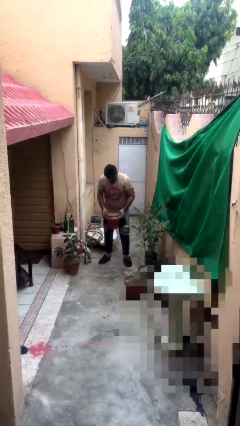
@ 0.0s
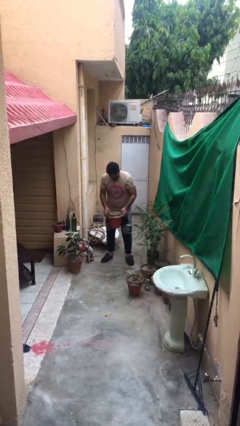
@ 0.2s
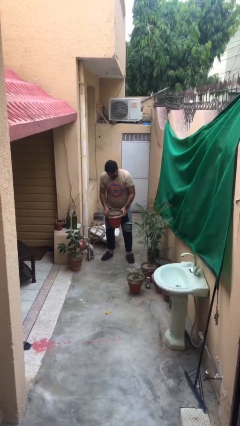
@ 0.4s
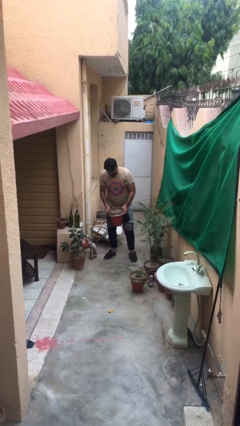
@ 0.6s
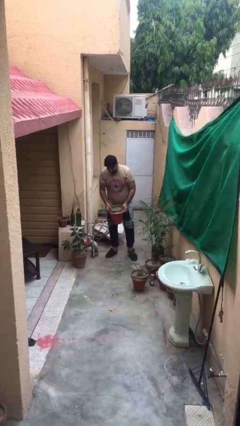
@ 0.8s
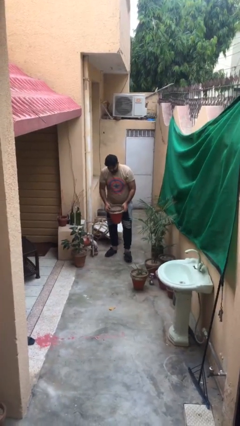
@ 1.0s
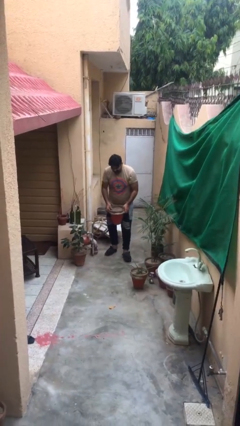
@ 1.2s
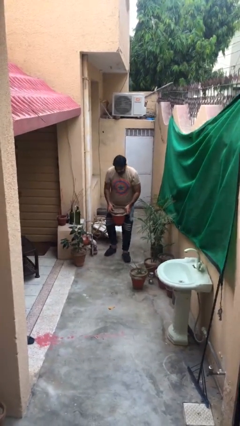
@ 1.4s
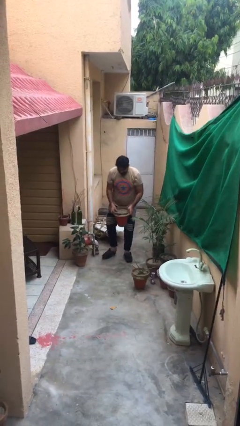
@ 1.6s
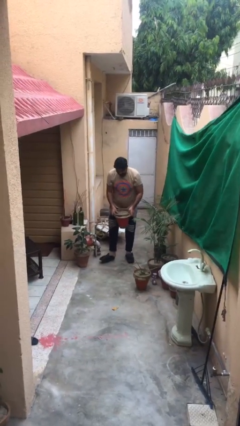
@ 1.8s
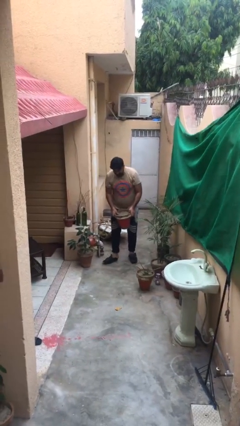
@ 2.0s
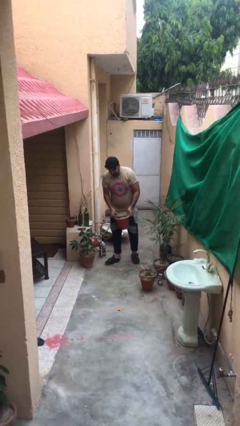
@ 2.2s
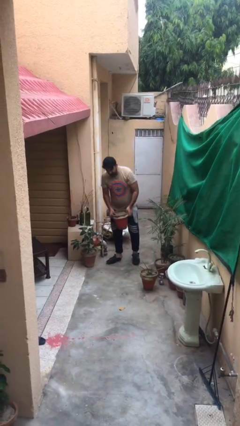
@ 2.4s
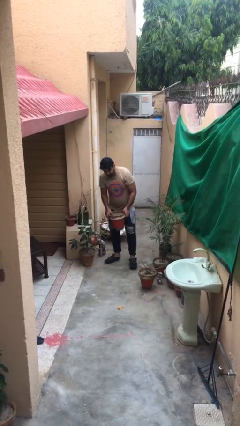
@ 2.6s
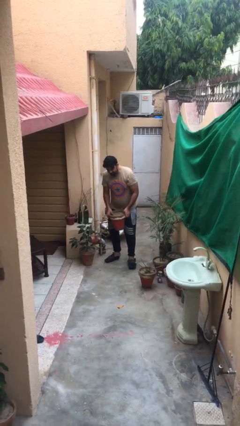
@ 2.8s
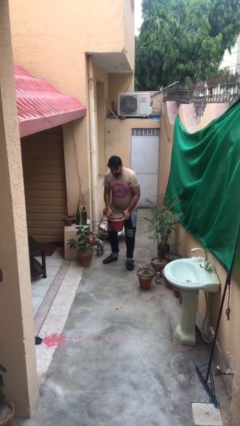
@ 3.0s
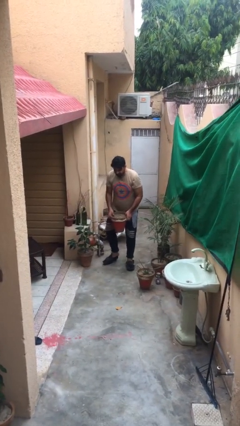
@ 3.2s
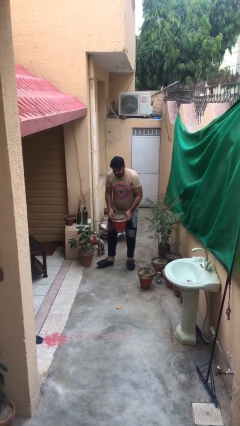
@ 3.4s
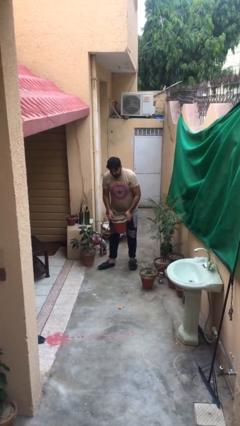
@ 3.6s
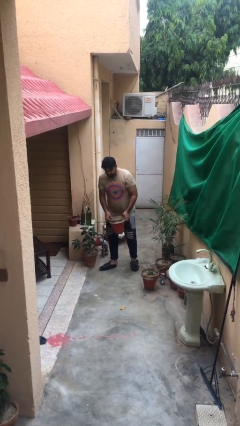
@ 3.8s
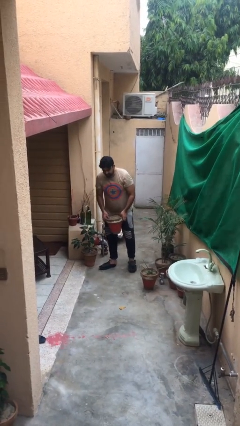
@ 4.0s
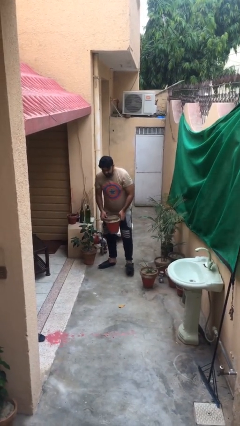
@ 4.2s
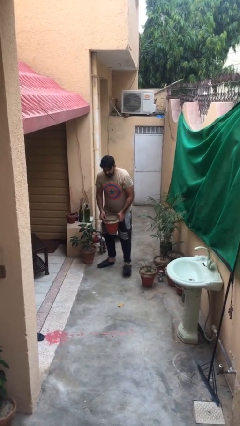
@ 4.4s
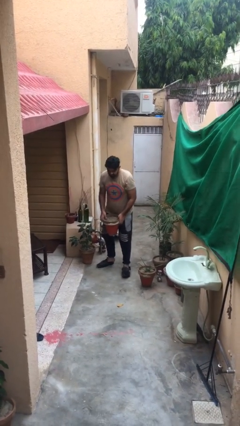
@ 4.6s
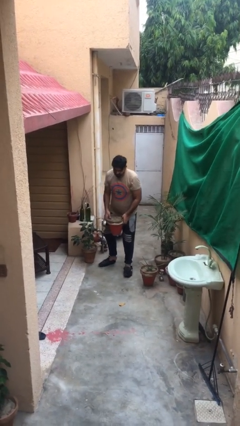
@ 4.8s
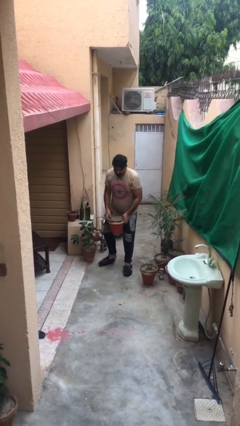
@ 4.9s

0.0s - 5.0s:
person carries heavy object

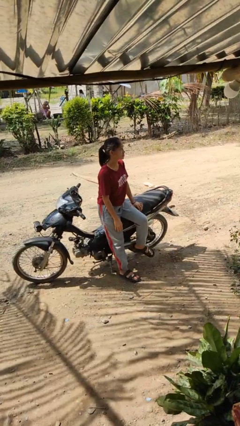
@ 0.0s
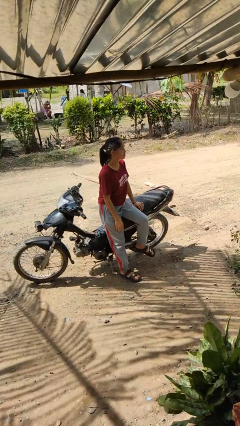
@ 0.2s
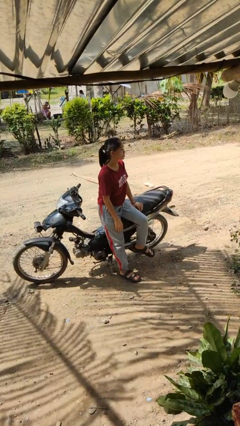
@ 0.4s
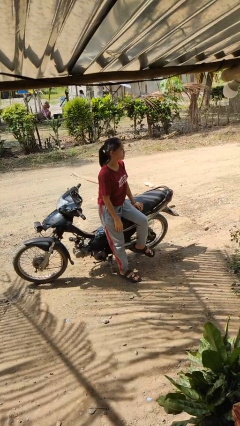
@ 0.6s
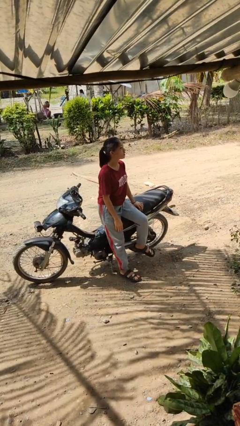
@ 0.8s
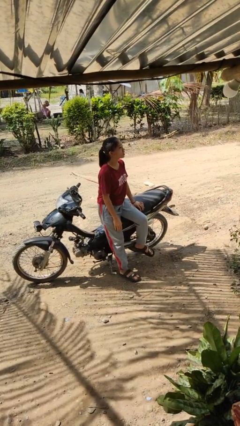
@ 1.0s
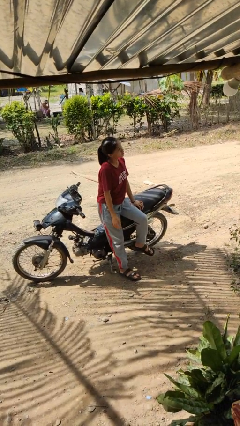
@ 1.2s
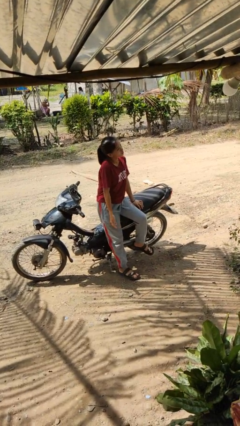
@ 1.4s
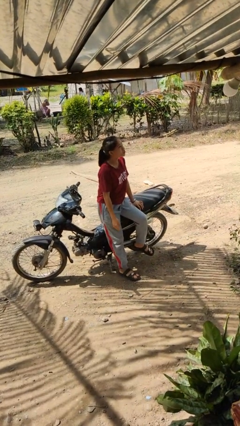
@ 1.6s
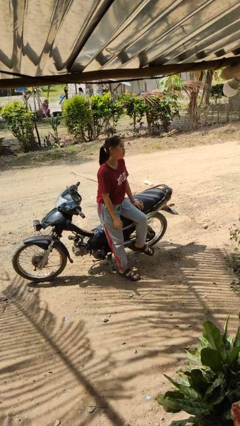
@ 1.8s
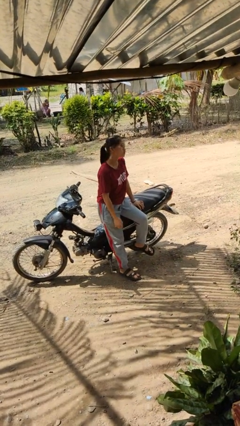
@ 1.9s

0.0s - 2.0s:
person shrugs

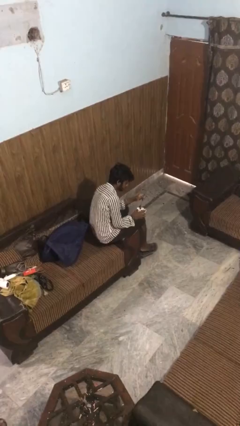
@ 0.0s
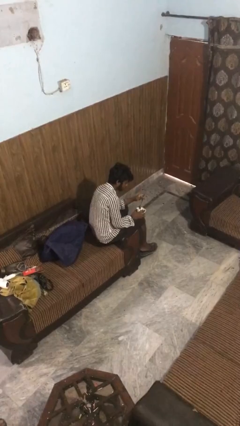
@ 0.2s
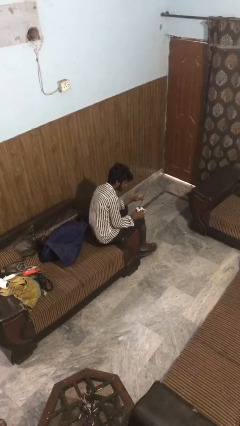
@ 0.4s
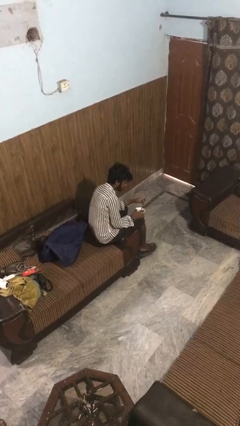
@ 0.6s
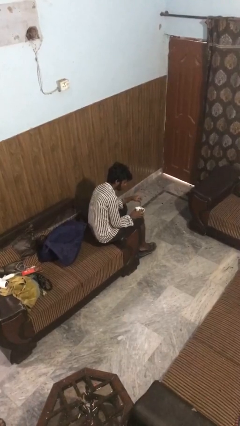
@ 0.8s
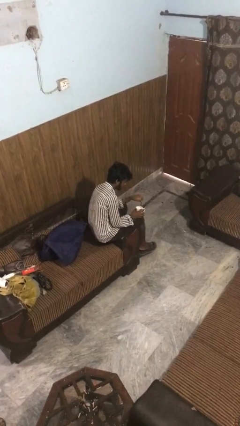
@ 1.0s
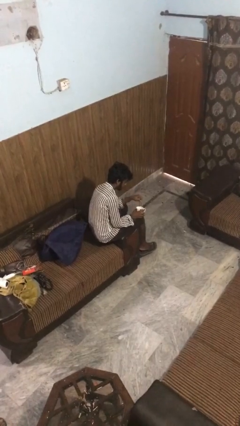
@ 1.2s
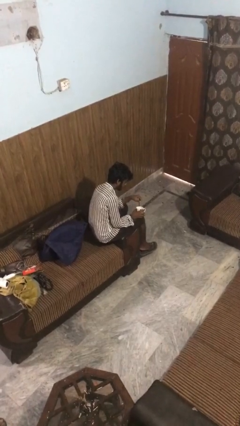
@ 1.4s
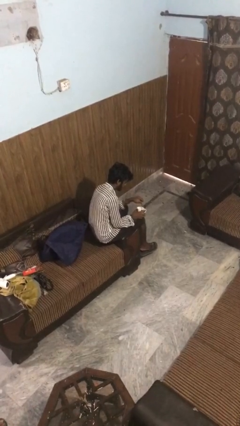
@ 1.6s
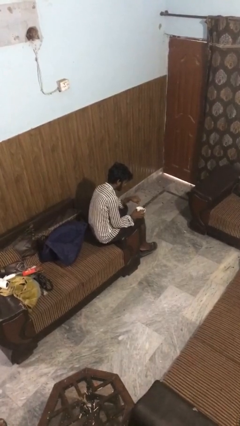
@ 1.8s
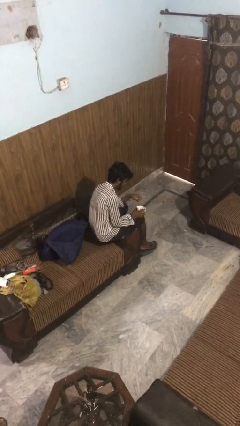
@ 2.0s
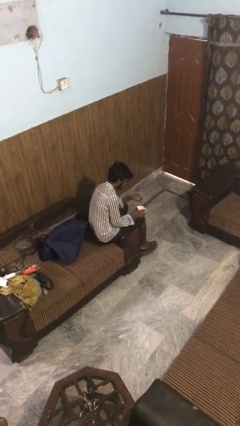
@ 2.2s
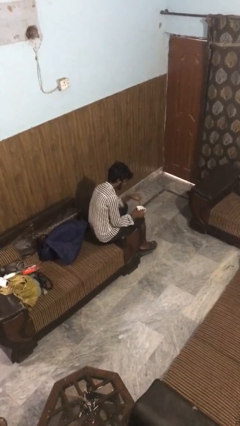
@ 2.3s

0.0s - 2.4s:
person stirs mug

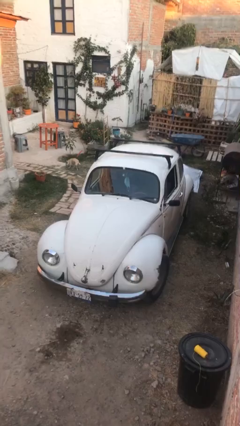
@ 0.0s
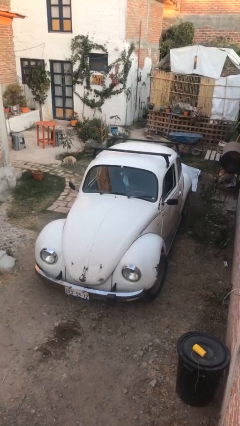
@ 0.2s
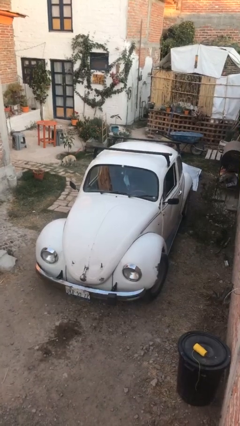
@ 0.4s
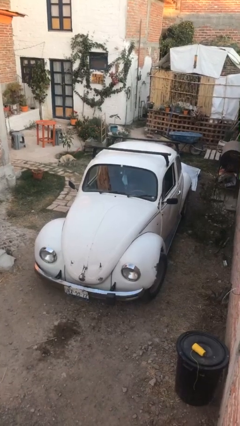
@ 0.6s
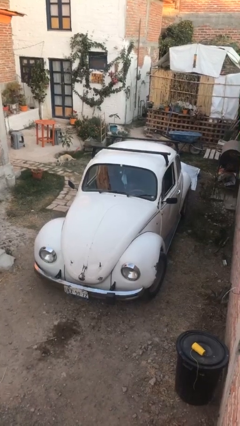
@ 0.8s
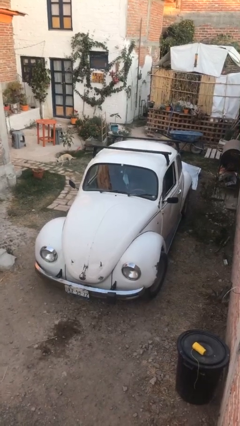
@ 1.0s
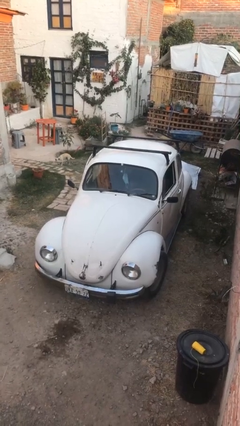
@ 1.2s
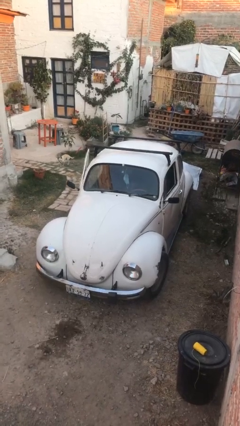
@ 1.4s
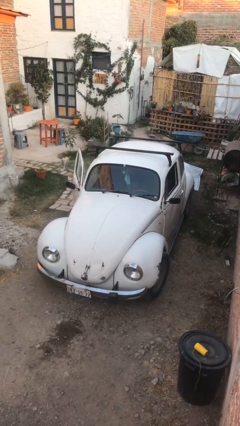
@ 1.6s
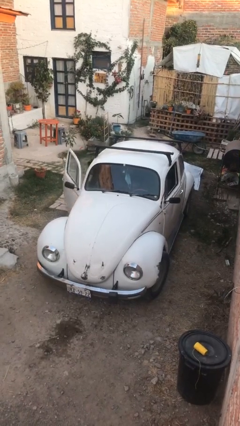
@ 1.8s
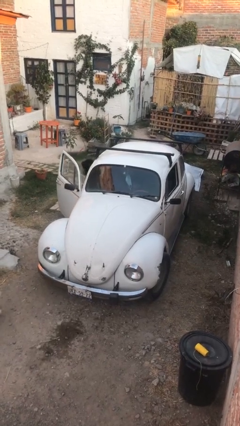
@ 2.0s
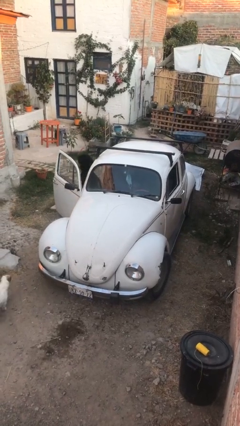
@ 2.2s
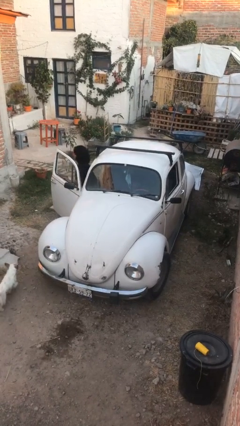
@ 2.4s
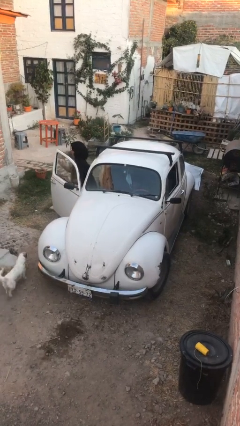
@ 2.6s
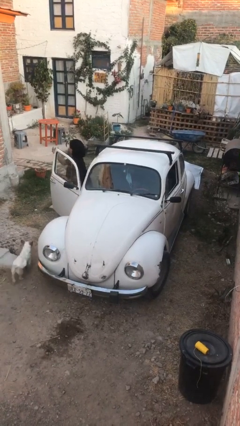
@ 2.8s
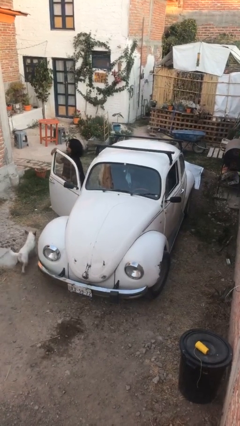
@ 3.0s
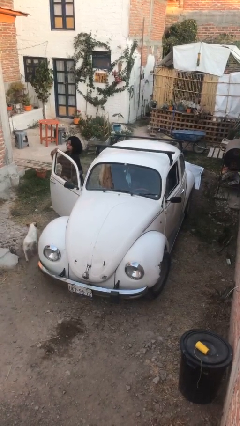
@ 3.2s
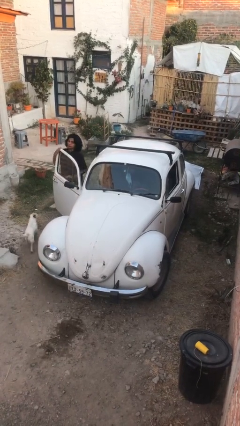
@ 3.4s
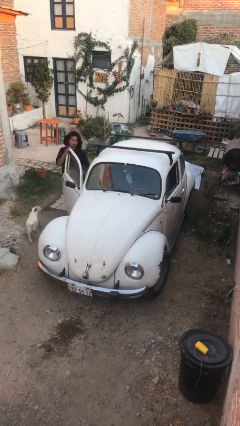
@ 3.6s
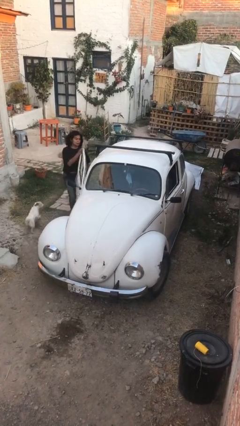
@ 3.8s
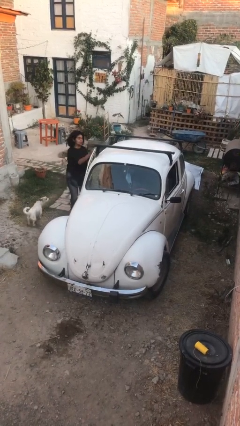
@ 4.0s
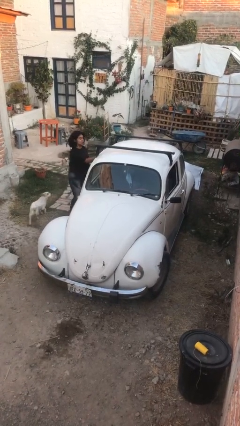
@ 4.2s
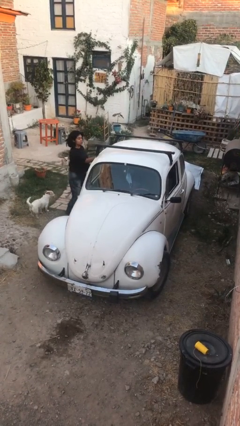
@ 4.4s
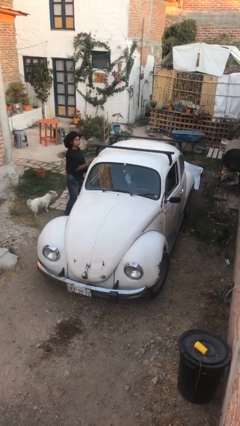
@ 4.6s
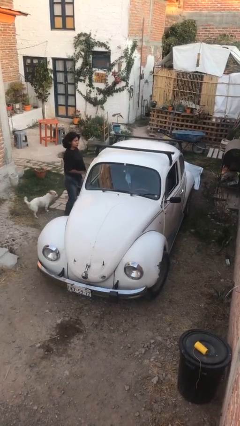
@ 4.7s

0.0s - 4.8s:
car drops off person

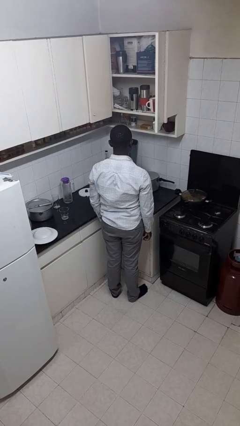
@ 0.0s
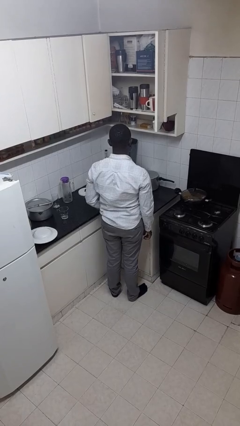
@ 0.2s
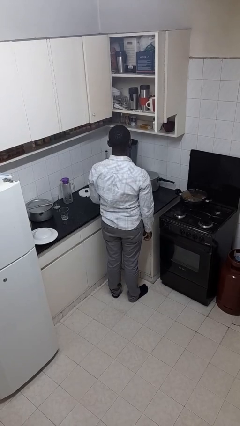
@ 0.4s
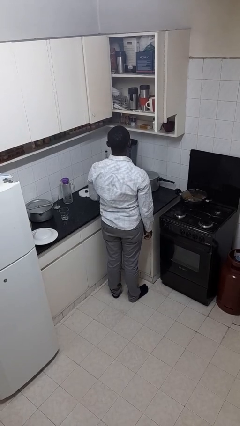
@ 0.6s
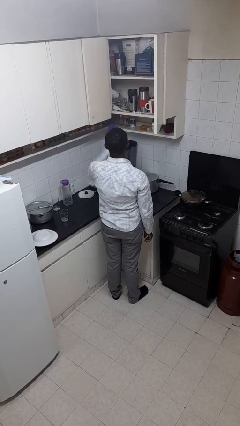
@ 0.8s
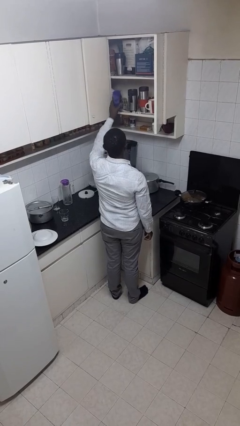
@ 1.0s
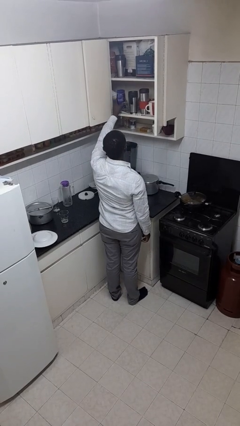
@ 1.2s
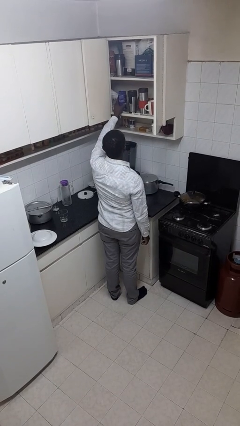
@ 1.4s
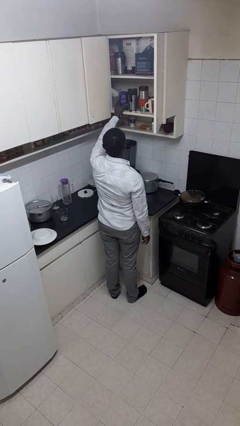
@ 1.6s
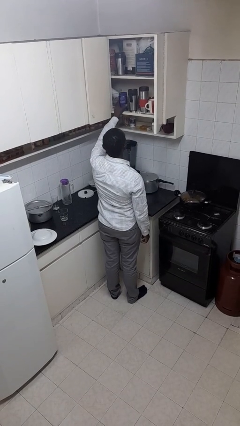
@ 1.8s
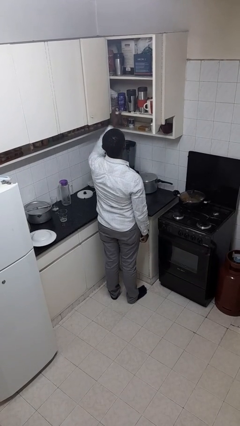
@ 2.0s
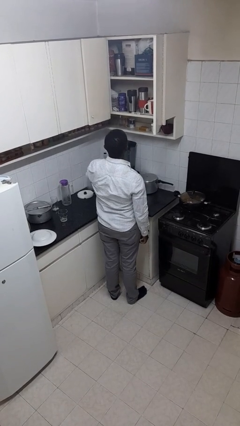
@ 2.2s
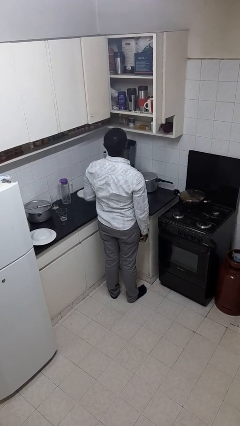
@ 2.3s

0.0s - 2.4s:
person puts object in cabinet

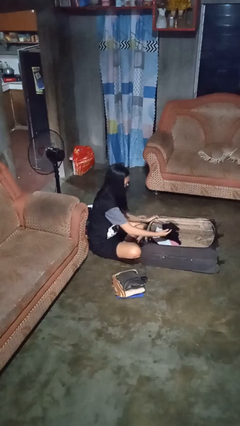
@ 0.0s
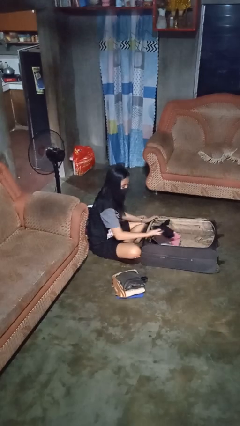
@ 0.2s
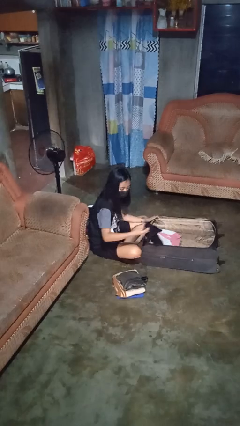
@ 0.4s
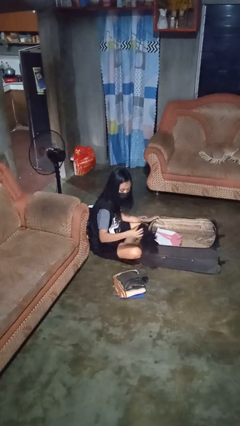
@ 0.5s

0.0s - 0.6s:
person unloads clothes from suitcase
